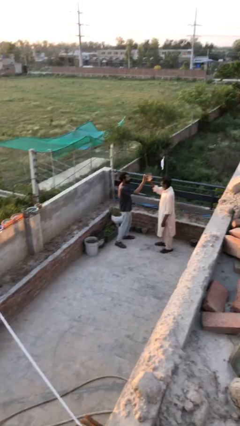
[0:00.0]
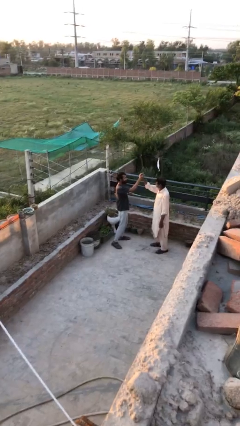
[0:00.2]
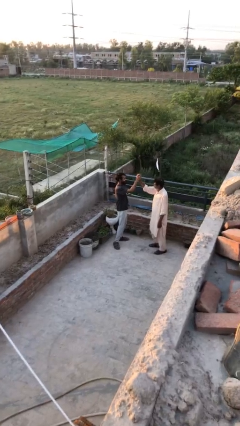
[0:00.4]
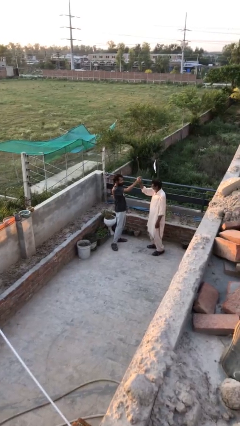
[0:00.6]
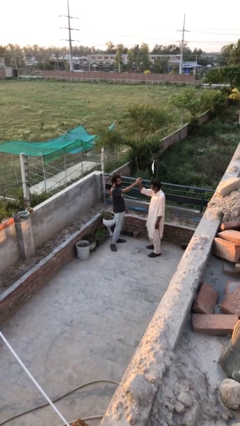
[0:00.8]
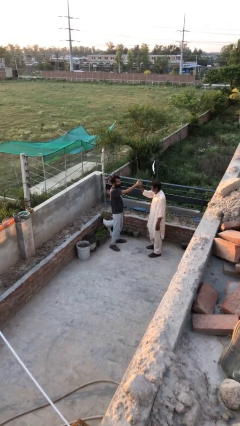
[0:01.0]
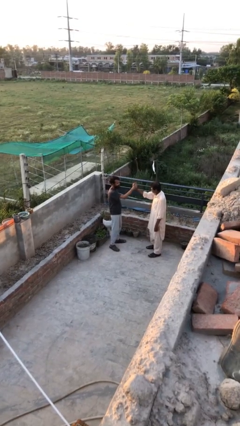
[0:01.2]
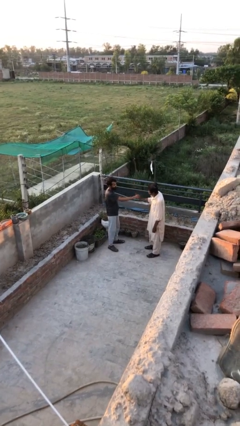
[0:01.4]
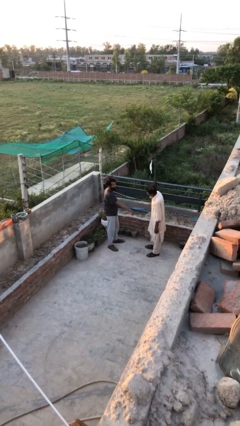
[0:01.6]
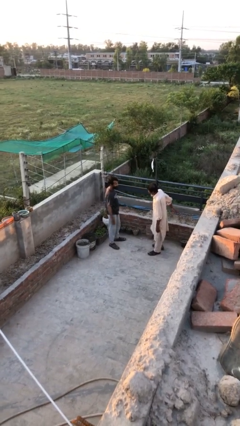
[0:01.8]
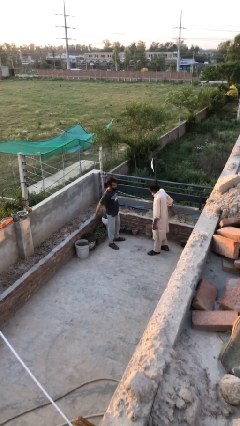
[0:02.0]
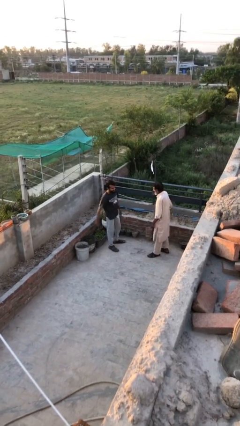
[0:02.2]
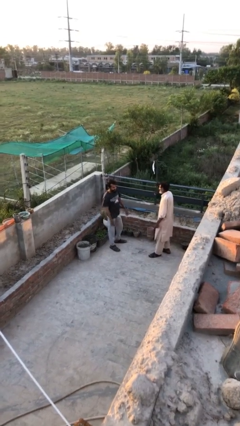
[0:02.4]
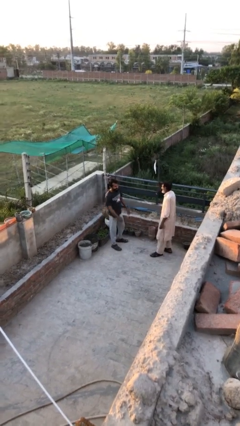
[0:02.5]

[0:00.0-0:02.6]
person highfives hand

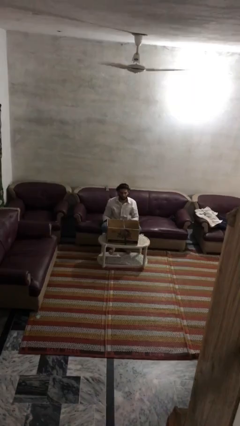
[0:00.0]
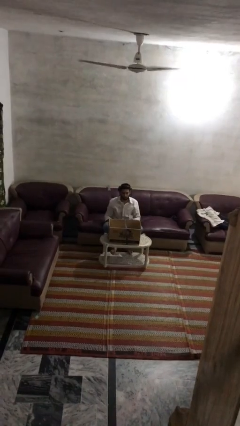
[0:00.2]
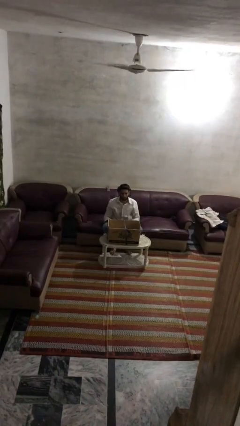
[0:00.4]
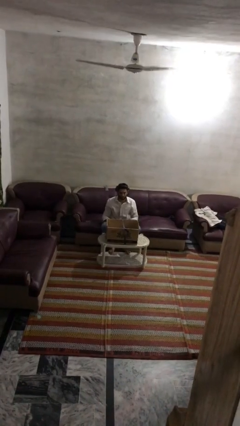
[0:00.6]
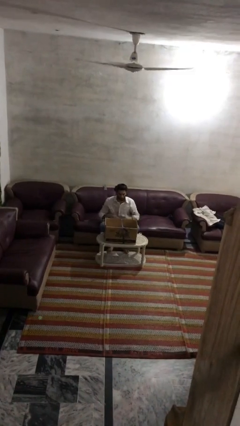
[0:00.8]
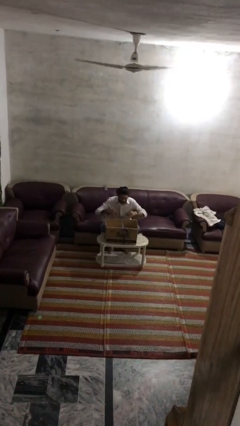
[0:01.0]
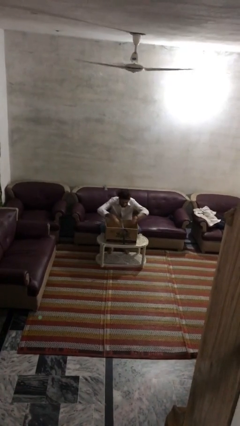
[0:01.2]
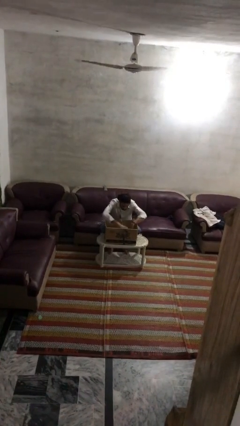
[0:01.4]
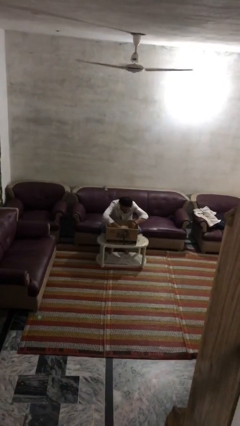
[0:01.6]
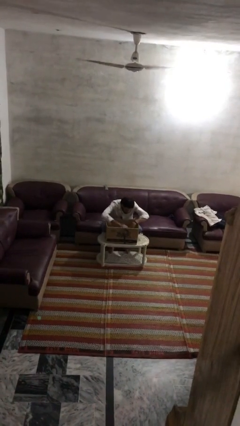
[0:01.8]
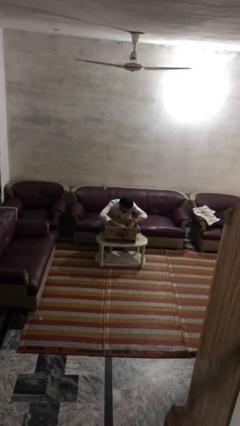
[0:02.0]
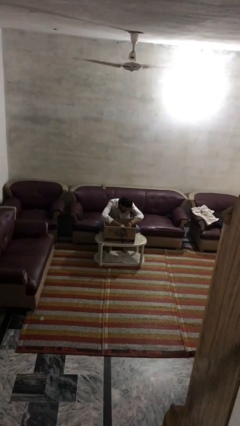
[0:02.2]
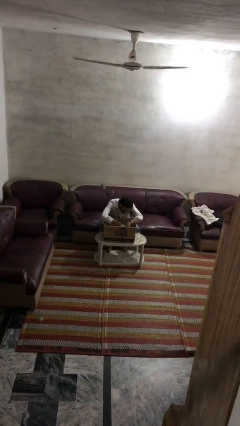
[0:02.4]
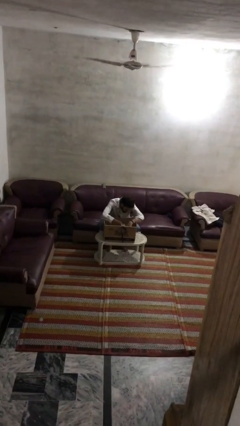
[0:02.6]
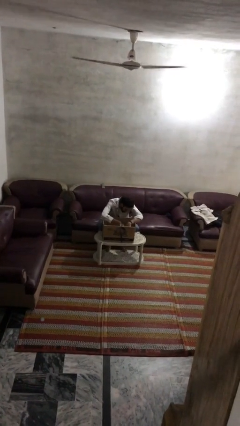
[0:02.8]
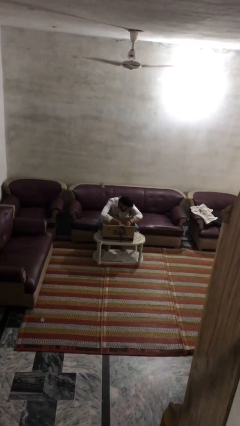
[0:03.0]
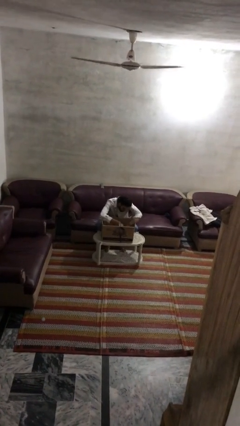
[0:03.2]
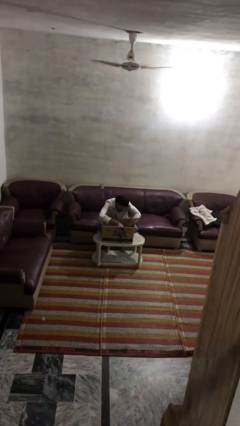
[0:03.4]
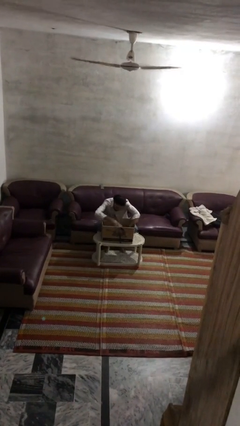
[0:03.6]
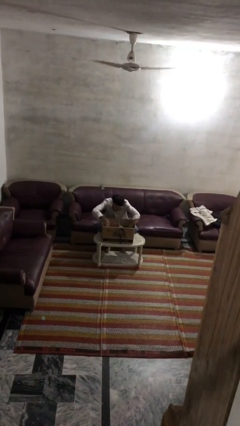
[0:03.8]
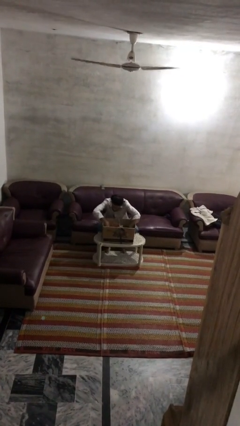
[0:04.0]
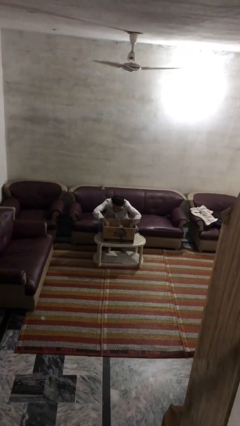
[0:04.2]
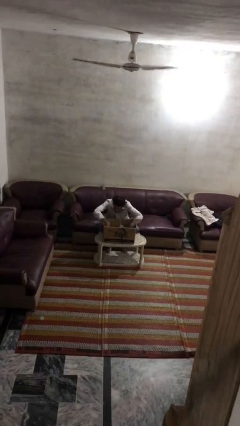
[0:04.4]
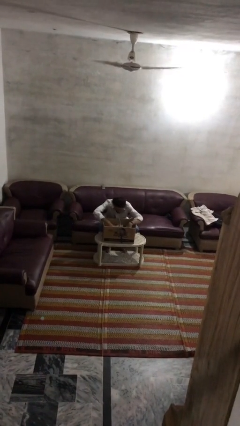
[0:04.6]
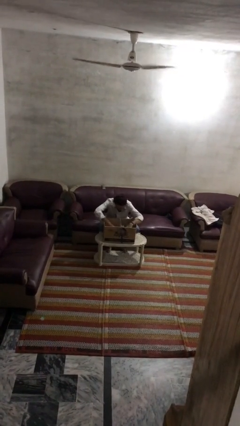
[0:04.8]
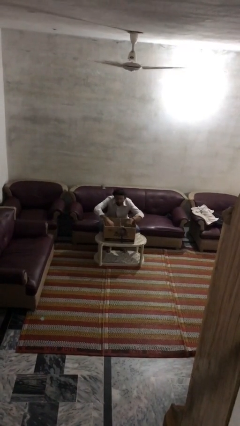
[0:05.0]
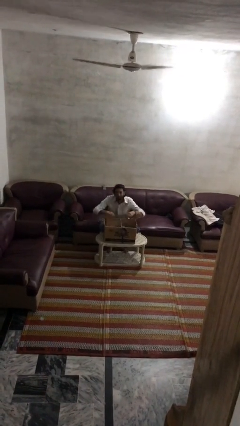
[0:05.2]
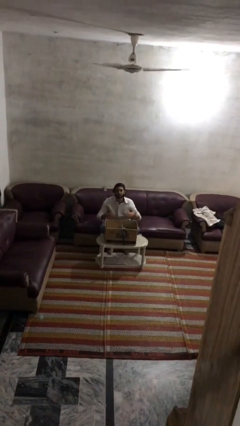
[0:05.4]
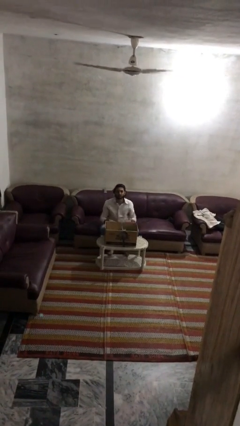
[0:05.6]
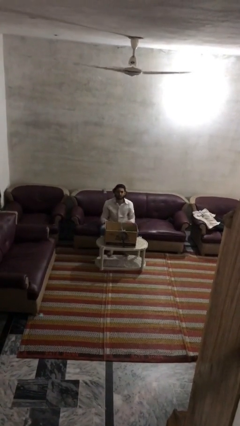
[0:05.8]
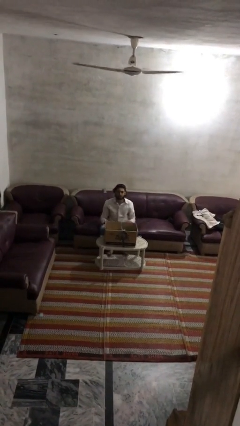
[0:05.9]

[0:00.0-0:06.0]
person searches in box

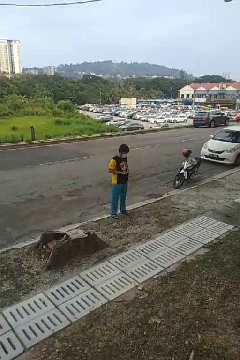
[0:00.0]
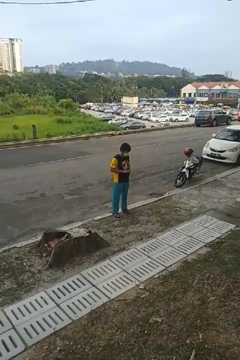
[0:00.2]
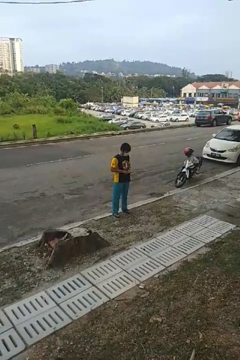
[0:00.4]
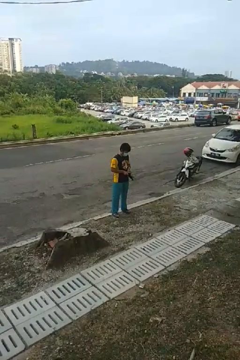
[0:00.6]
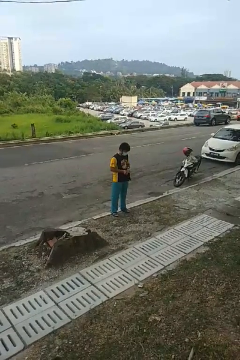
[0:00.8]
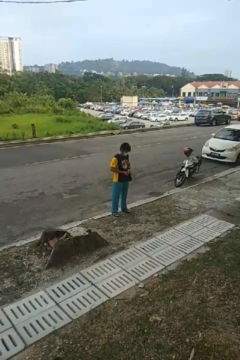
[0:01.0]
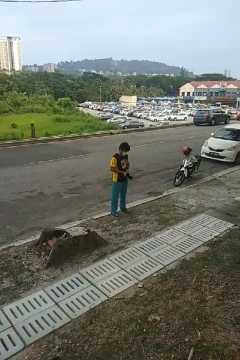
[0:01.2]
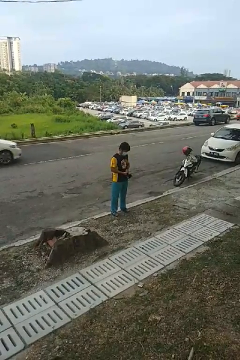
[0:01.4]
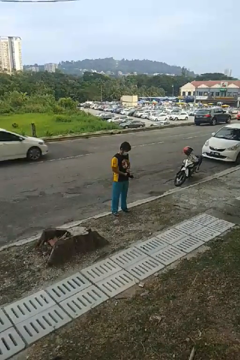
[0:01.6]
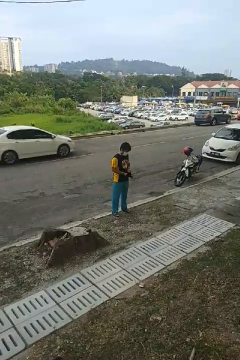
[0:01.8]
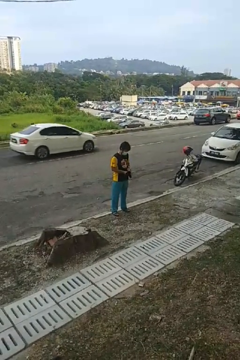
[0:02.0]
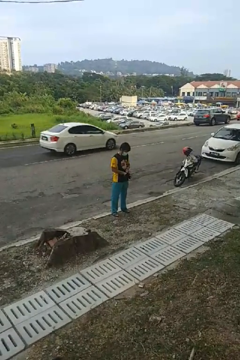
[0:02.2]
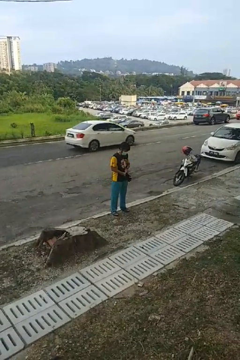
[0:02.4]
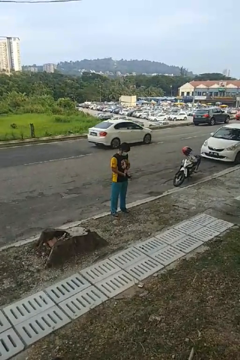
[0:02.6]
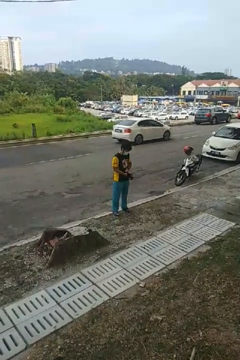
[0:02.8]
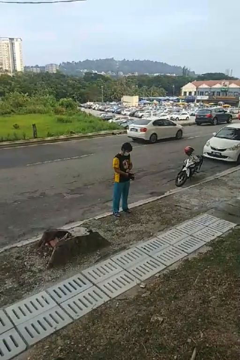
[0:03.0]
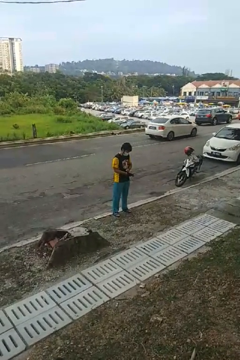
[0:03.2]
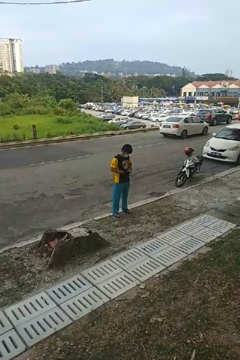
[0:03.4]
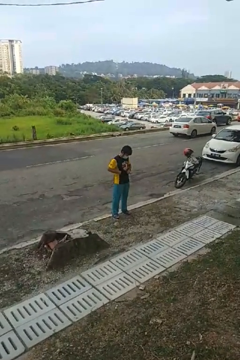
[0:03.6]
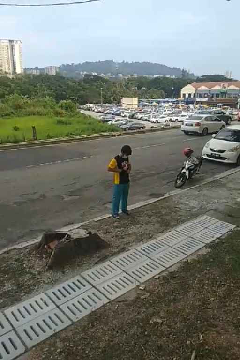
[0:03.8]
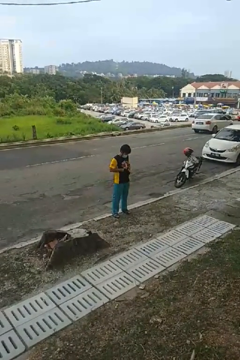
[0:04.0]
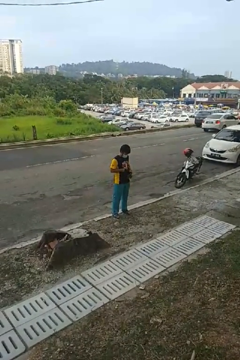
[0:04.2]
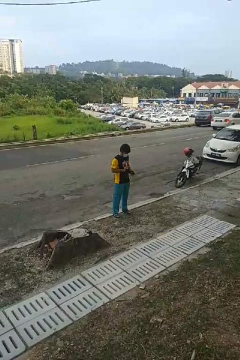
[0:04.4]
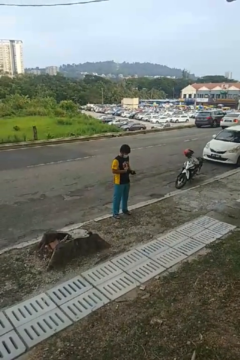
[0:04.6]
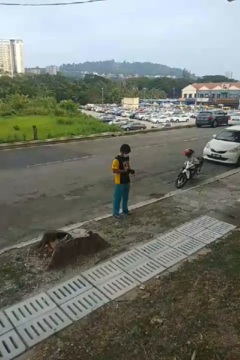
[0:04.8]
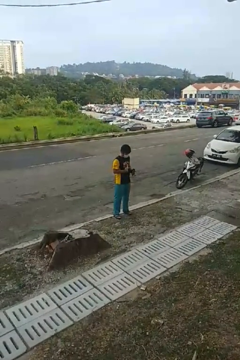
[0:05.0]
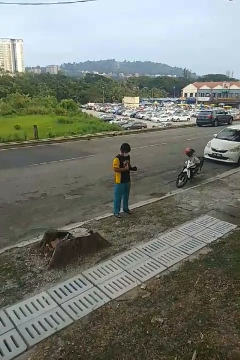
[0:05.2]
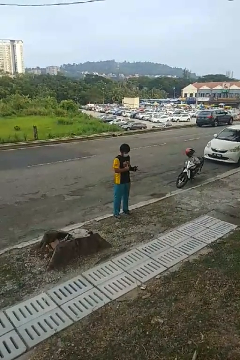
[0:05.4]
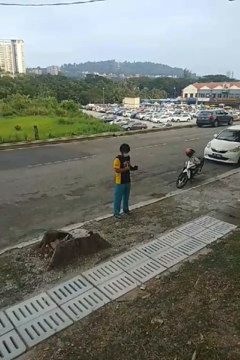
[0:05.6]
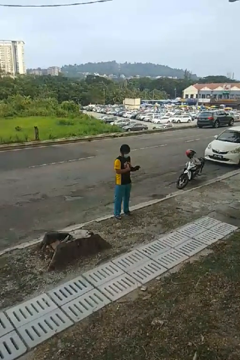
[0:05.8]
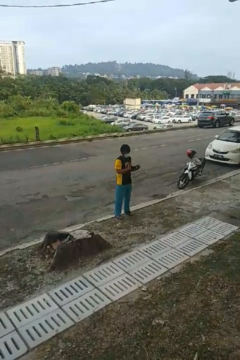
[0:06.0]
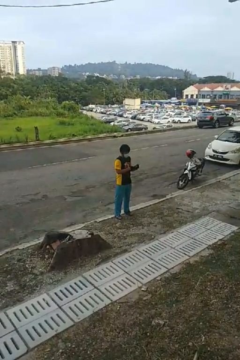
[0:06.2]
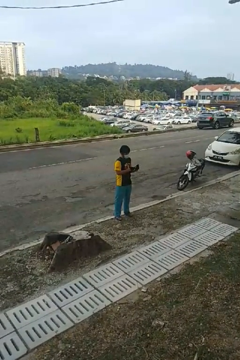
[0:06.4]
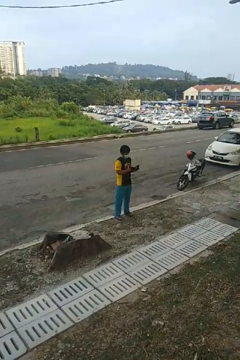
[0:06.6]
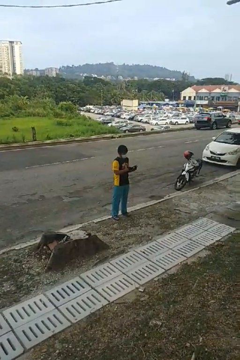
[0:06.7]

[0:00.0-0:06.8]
person puts on gloves

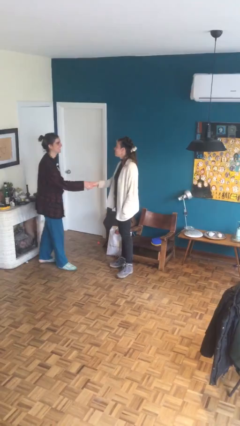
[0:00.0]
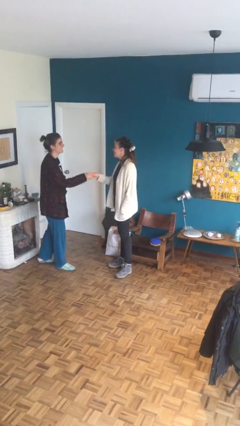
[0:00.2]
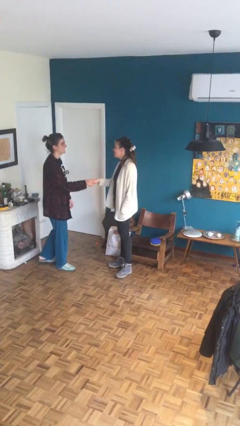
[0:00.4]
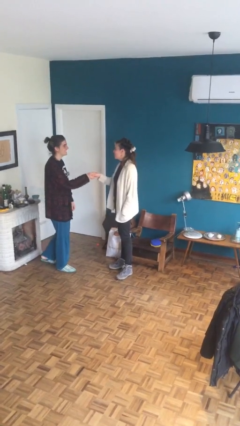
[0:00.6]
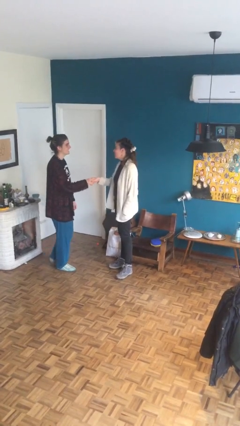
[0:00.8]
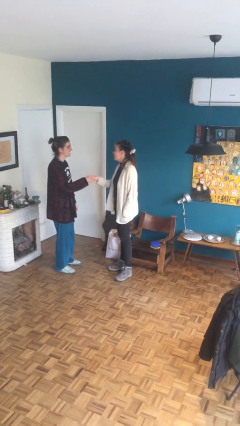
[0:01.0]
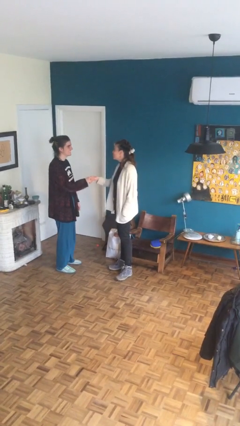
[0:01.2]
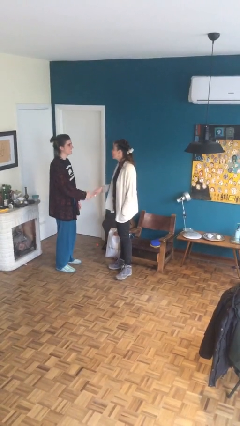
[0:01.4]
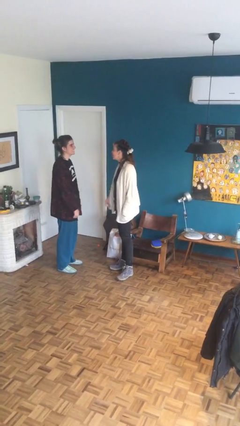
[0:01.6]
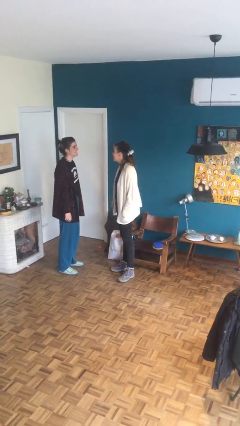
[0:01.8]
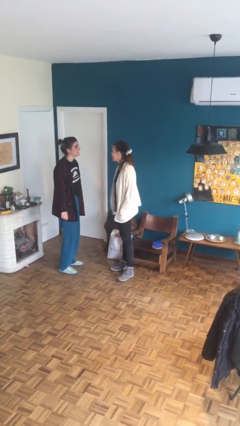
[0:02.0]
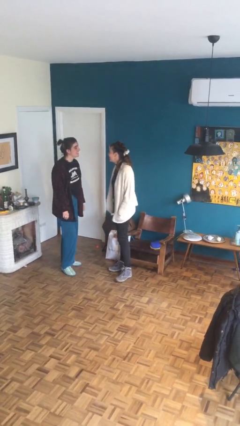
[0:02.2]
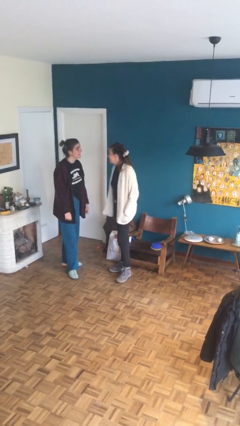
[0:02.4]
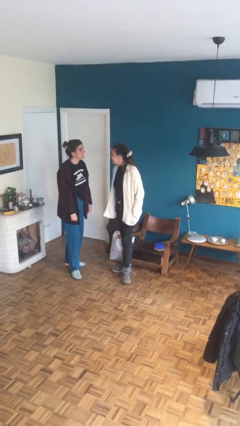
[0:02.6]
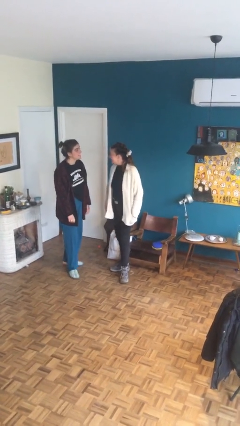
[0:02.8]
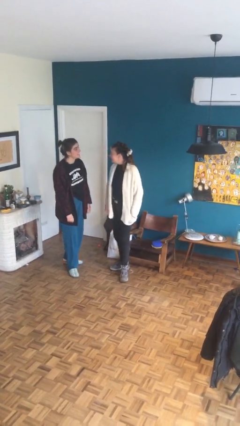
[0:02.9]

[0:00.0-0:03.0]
person shakes hand

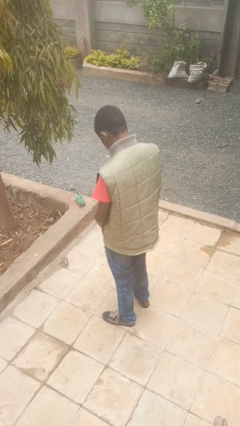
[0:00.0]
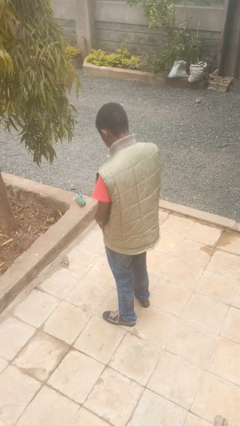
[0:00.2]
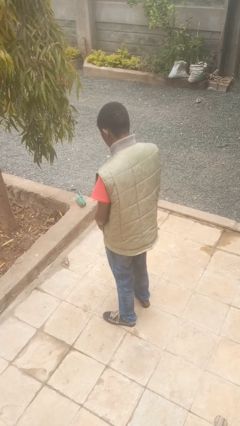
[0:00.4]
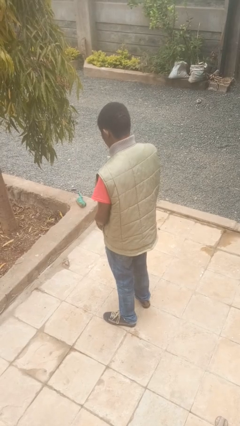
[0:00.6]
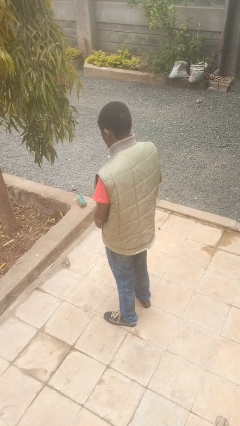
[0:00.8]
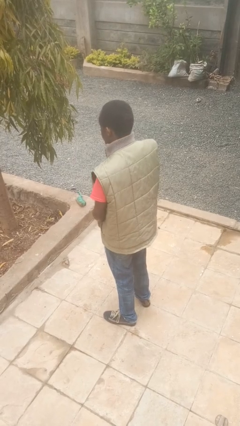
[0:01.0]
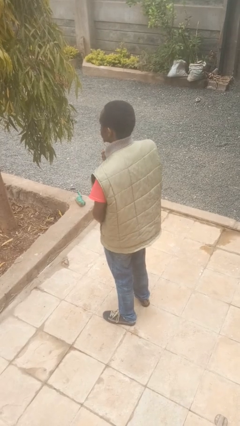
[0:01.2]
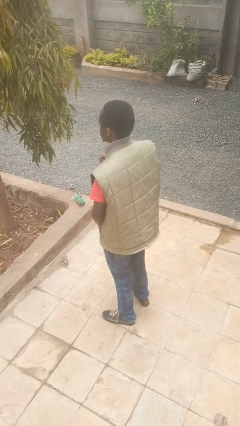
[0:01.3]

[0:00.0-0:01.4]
person zips up jacket
